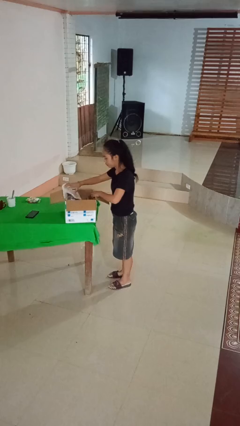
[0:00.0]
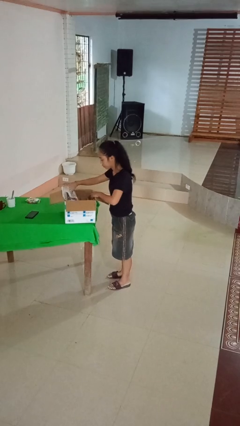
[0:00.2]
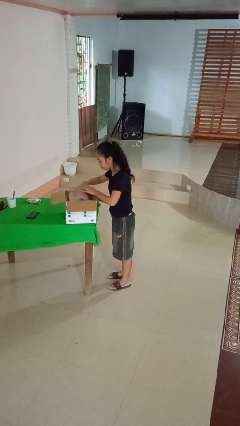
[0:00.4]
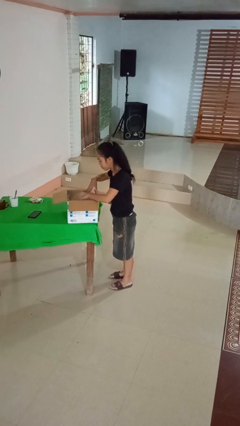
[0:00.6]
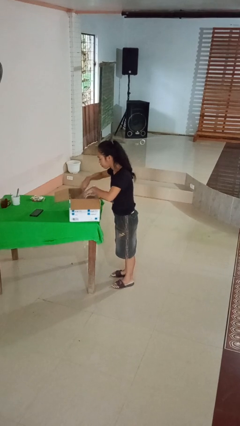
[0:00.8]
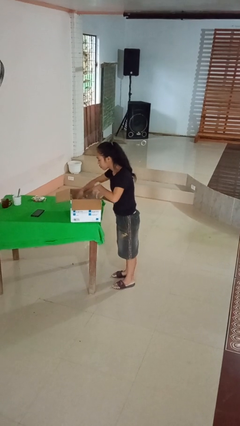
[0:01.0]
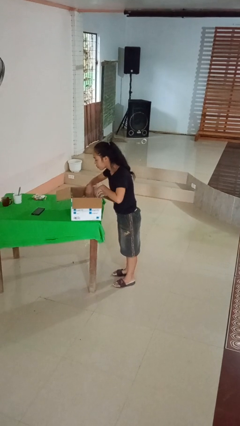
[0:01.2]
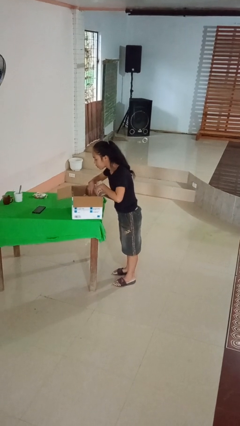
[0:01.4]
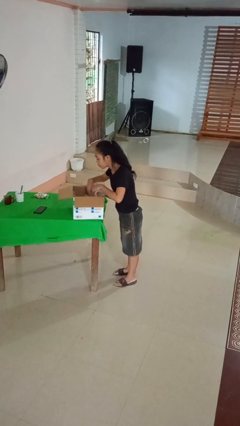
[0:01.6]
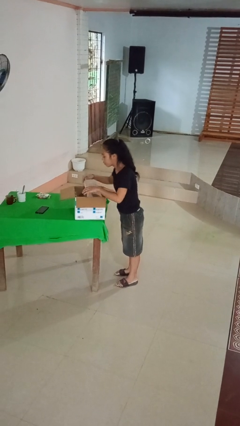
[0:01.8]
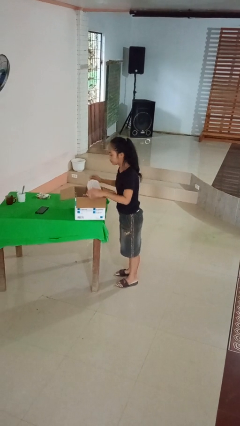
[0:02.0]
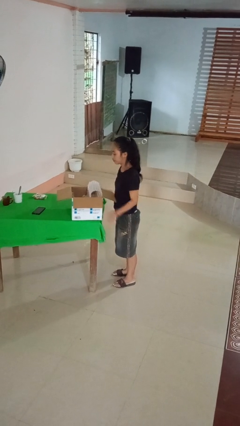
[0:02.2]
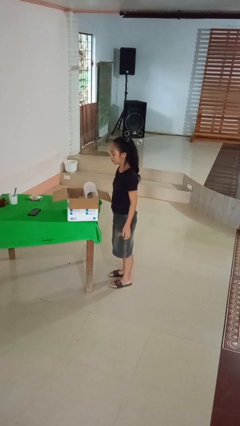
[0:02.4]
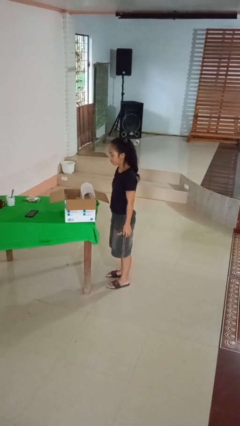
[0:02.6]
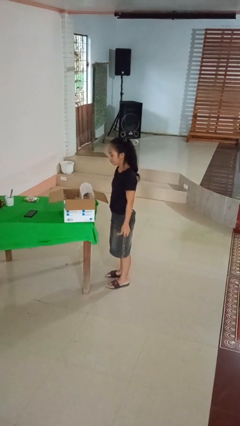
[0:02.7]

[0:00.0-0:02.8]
person searches in box

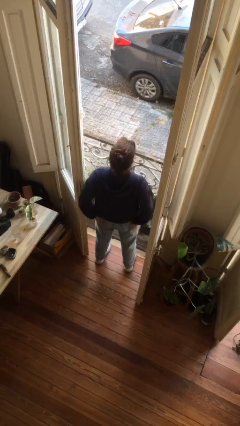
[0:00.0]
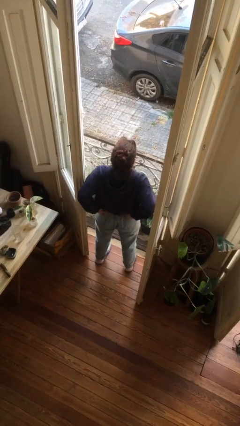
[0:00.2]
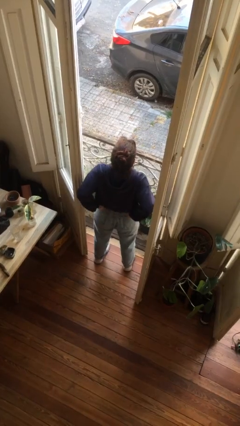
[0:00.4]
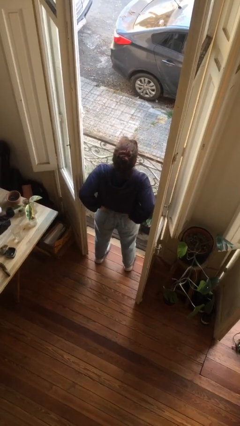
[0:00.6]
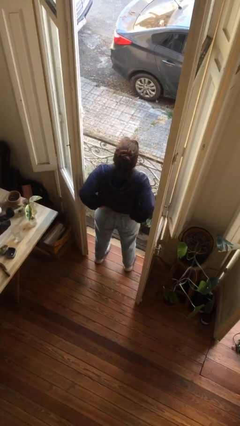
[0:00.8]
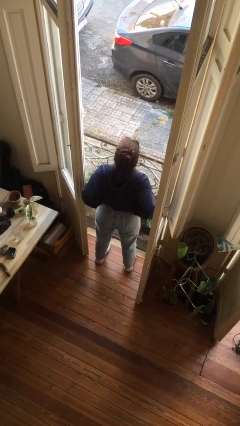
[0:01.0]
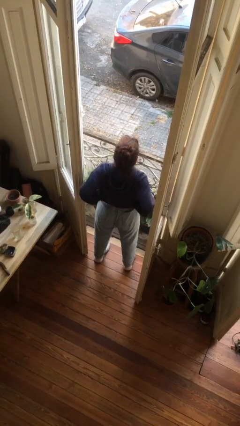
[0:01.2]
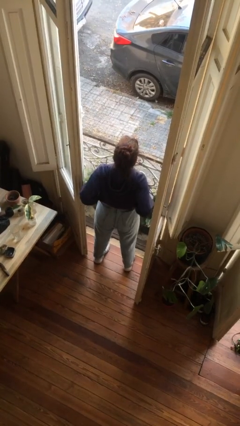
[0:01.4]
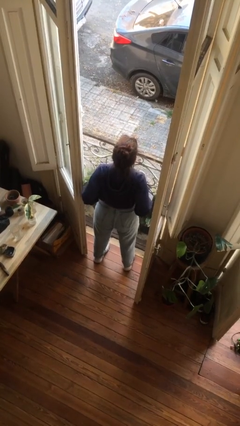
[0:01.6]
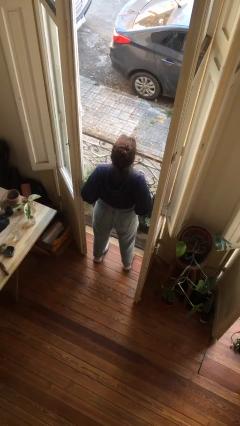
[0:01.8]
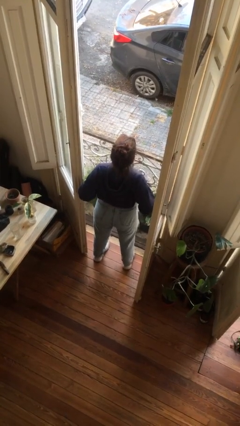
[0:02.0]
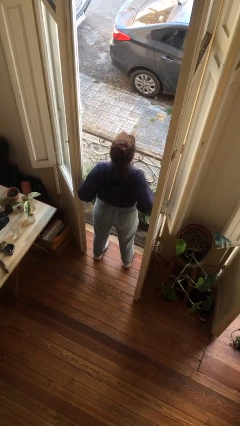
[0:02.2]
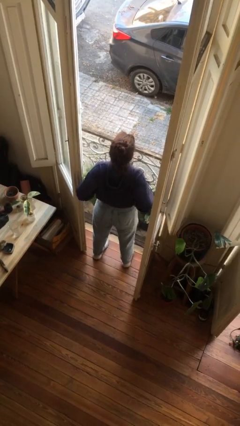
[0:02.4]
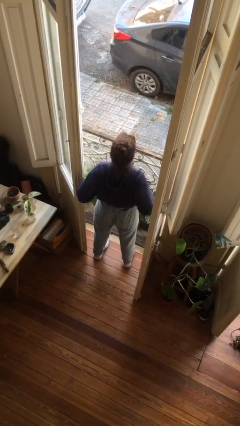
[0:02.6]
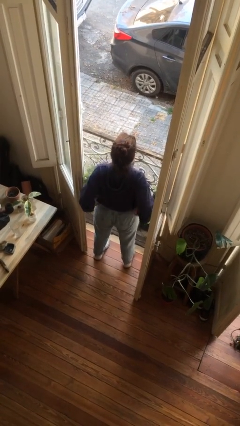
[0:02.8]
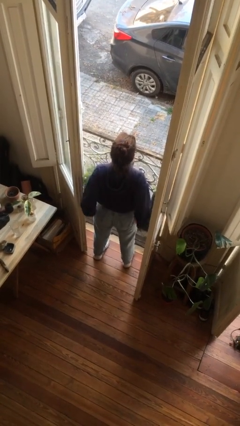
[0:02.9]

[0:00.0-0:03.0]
person hikes up pants

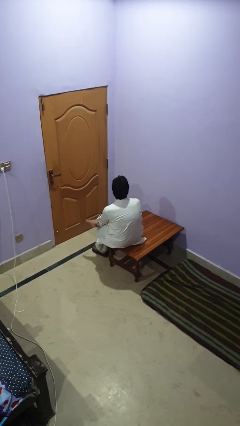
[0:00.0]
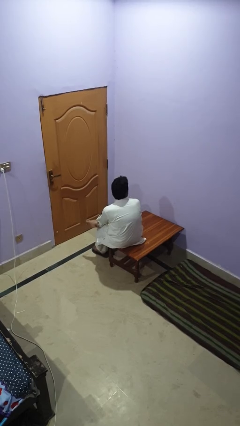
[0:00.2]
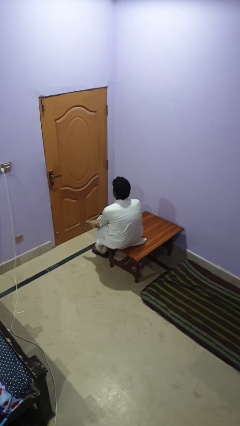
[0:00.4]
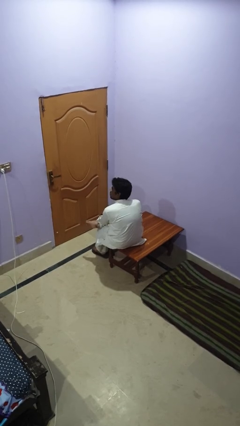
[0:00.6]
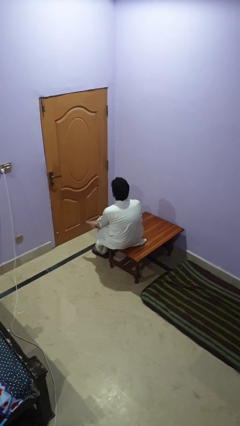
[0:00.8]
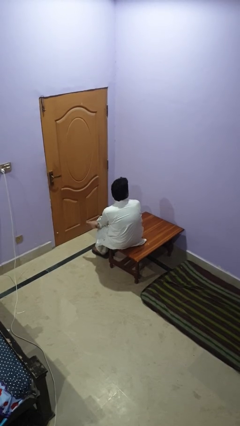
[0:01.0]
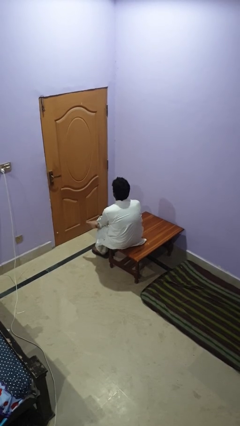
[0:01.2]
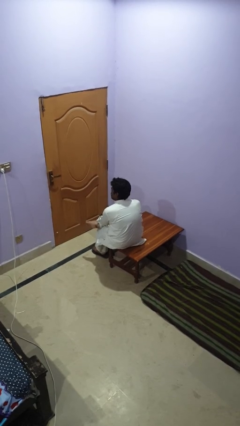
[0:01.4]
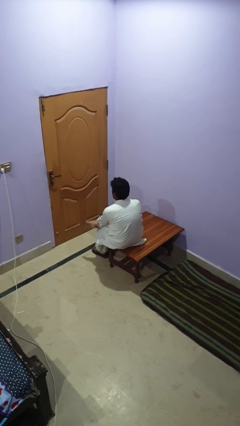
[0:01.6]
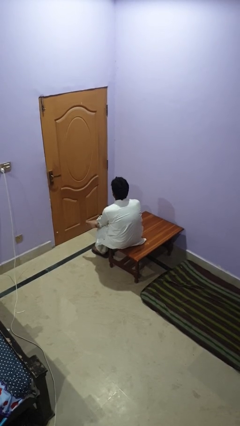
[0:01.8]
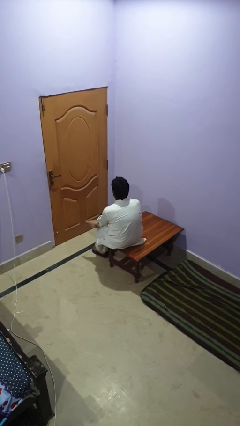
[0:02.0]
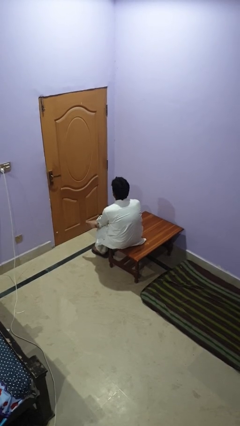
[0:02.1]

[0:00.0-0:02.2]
person shakes head

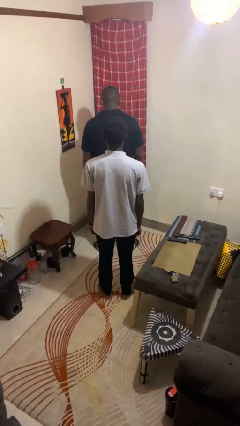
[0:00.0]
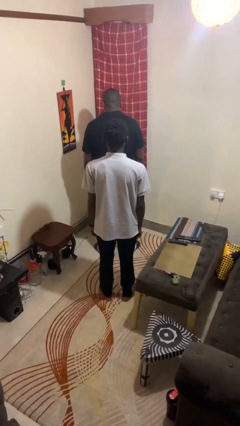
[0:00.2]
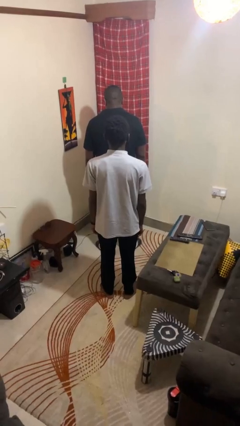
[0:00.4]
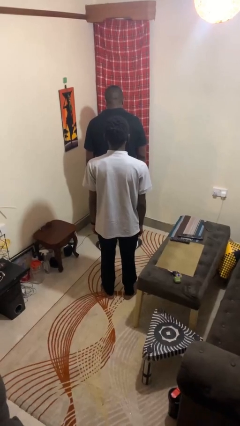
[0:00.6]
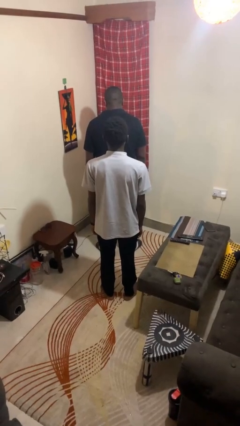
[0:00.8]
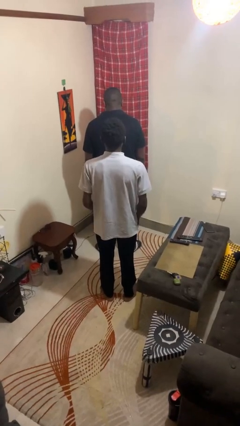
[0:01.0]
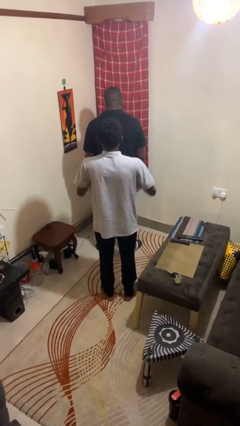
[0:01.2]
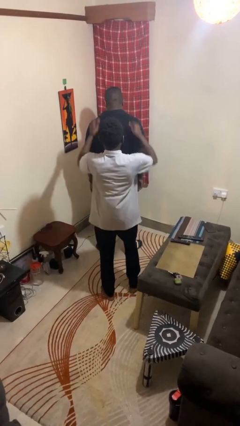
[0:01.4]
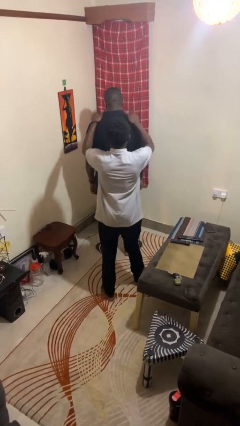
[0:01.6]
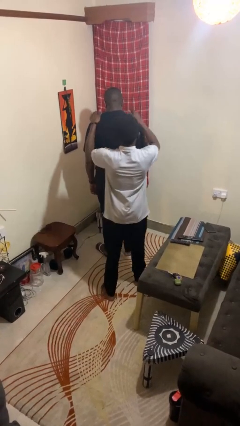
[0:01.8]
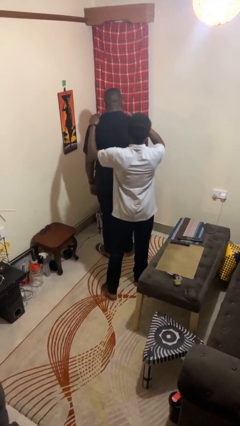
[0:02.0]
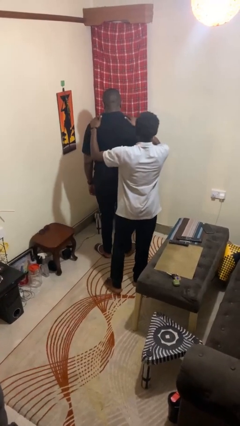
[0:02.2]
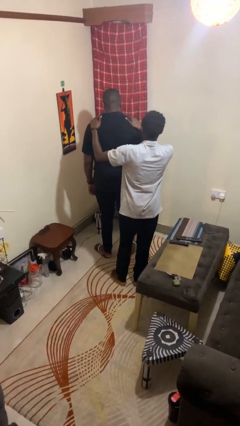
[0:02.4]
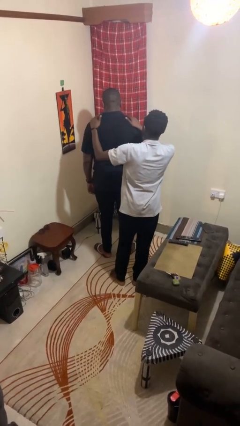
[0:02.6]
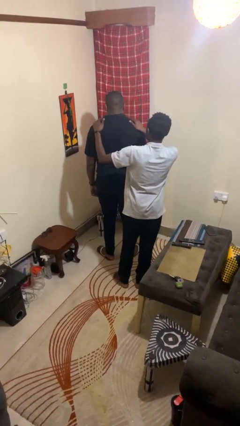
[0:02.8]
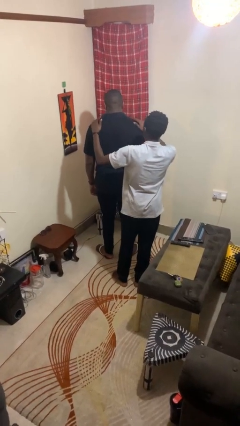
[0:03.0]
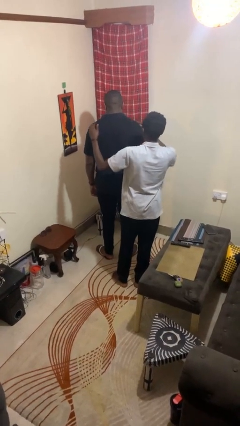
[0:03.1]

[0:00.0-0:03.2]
person pounds shoulders of person

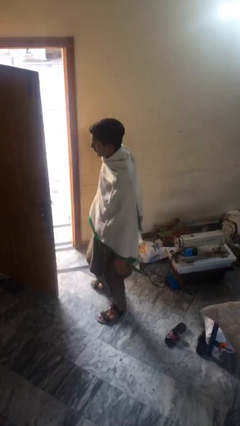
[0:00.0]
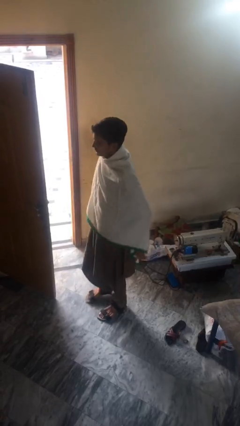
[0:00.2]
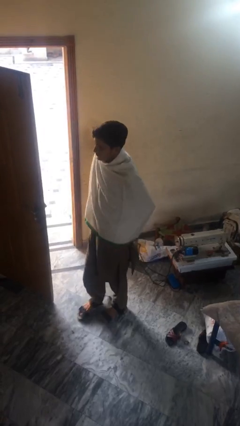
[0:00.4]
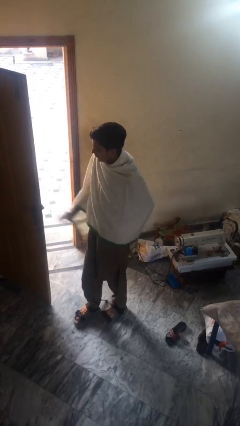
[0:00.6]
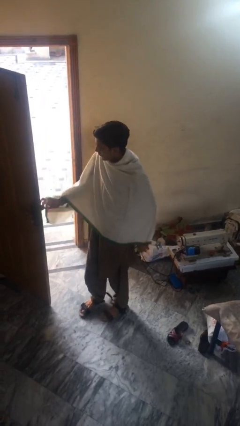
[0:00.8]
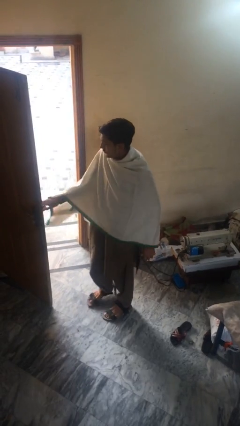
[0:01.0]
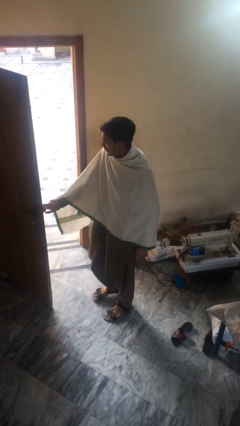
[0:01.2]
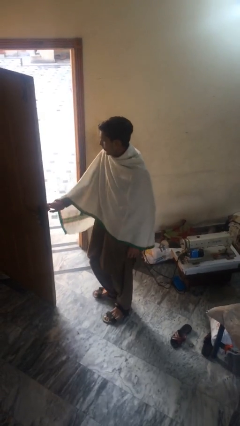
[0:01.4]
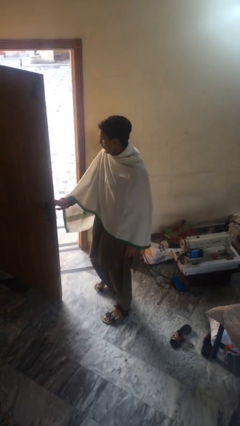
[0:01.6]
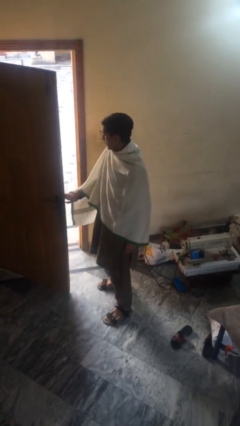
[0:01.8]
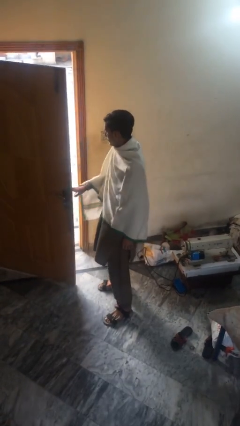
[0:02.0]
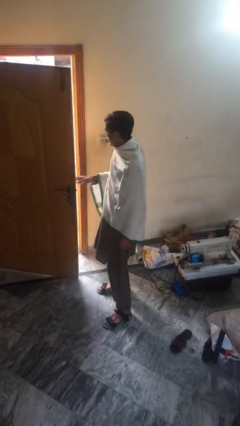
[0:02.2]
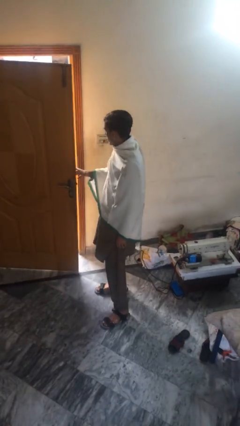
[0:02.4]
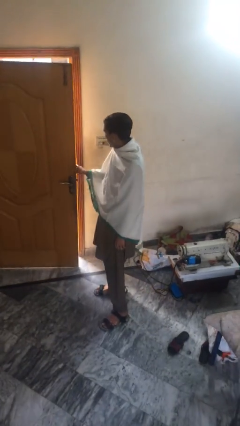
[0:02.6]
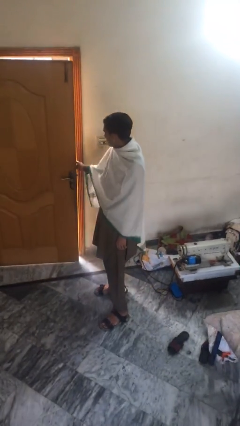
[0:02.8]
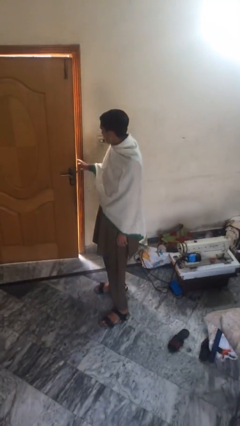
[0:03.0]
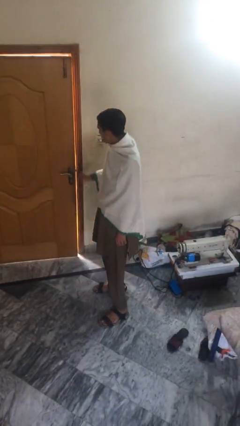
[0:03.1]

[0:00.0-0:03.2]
person closes facility door

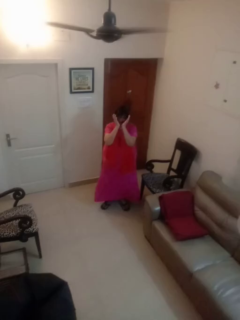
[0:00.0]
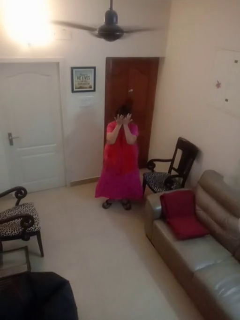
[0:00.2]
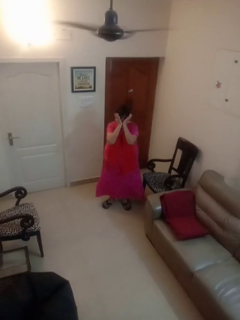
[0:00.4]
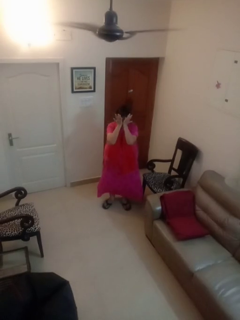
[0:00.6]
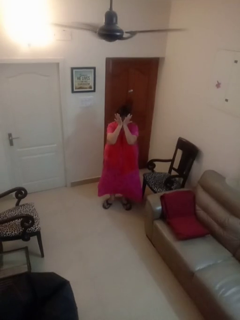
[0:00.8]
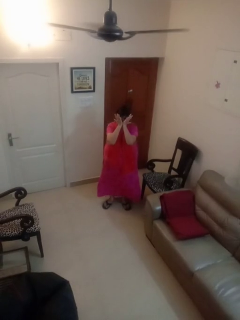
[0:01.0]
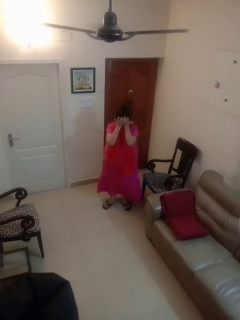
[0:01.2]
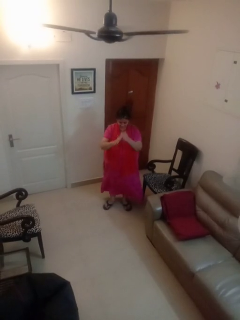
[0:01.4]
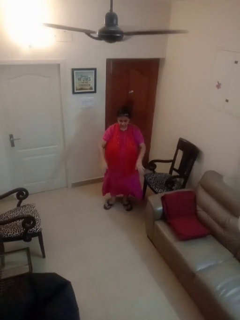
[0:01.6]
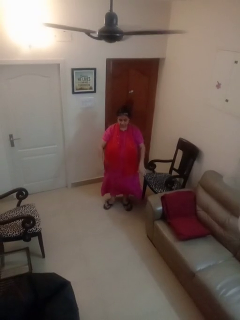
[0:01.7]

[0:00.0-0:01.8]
person rubs eyes

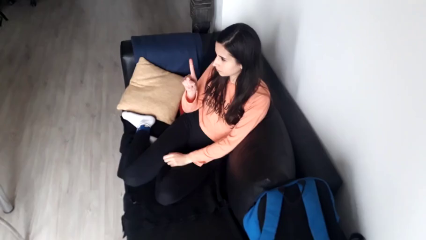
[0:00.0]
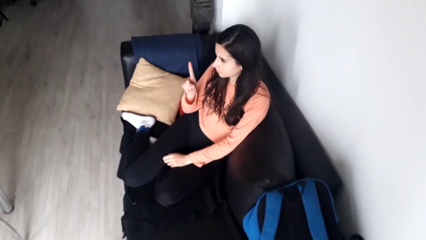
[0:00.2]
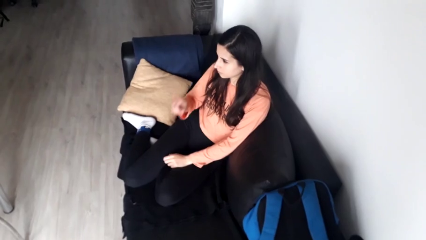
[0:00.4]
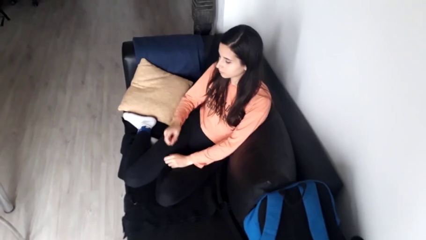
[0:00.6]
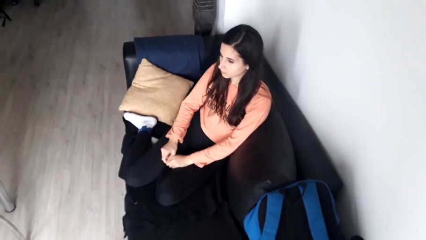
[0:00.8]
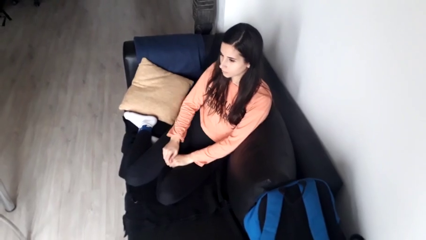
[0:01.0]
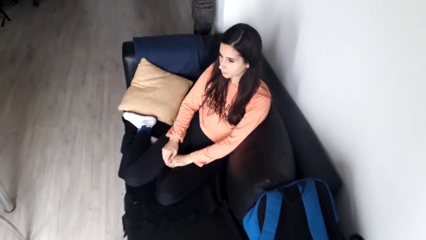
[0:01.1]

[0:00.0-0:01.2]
person gestures number one
